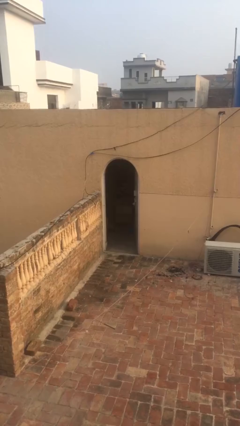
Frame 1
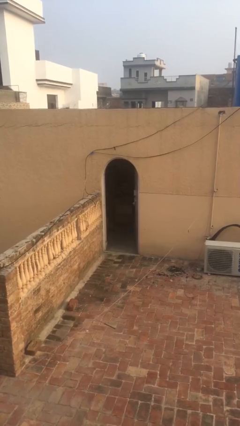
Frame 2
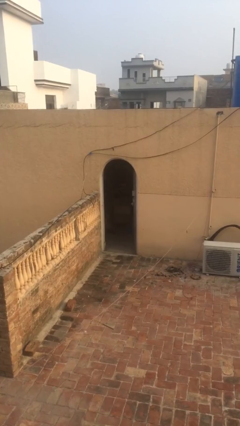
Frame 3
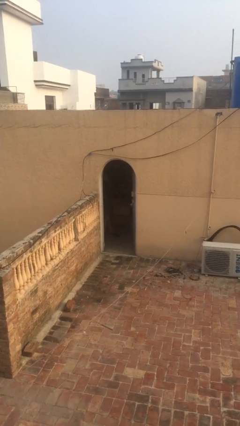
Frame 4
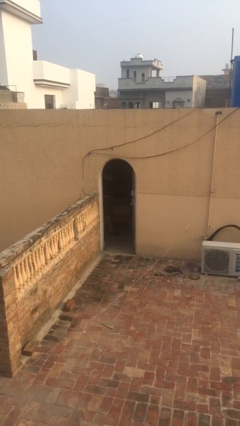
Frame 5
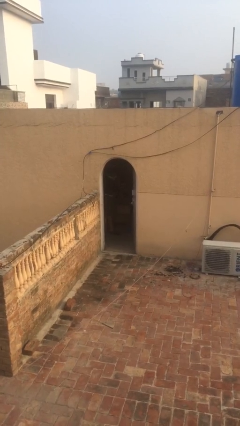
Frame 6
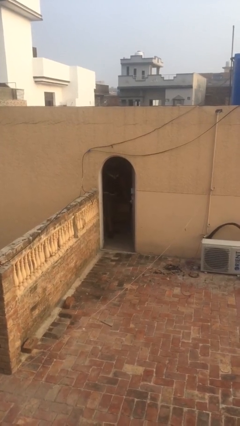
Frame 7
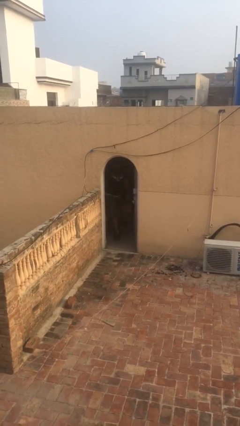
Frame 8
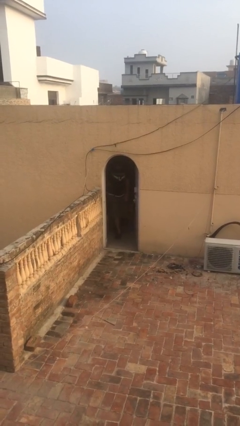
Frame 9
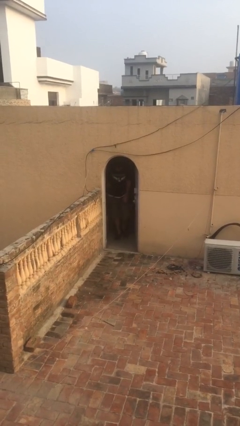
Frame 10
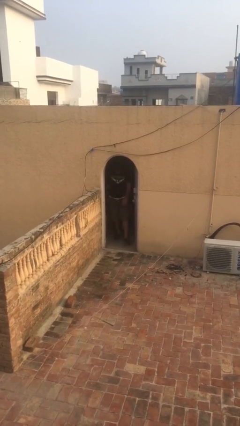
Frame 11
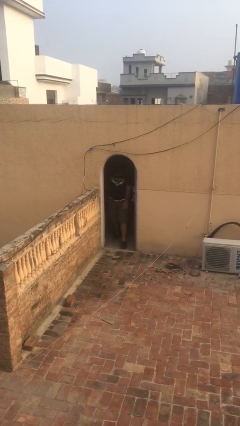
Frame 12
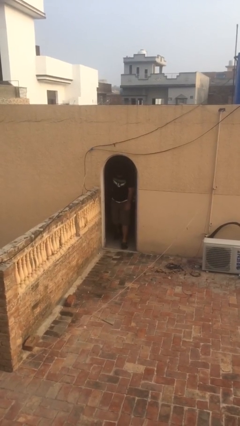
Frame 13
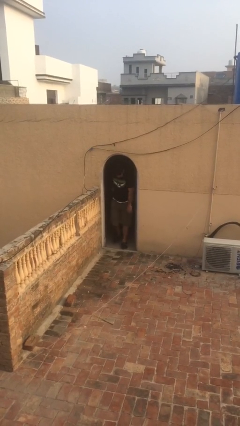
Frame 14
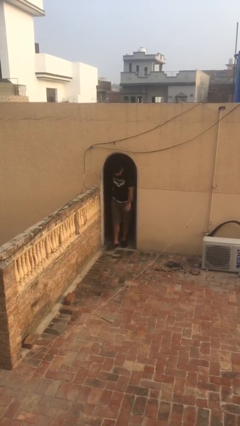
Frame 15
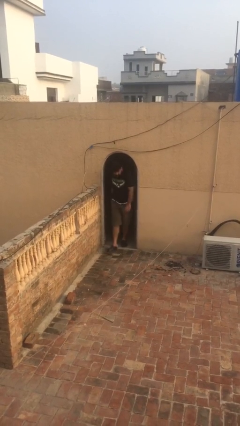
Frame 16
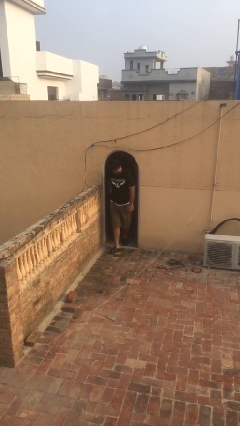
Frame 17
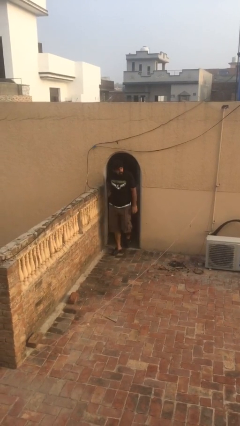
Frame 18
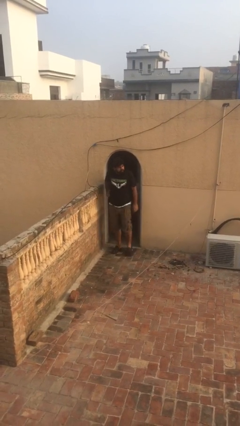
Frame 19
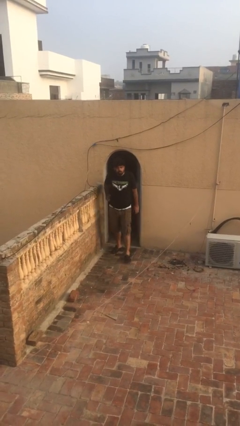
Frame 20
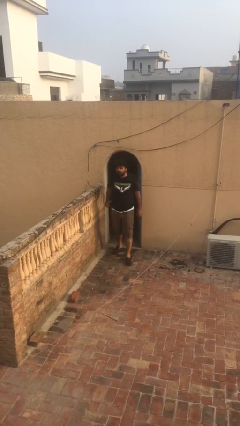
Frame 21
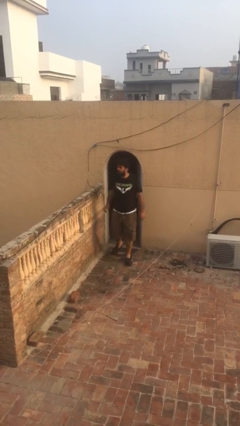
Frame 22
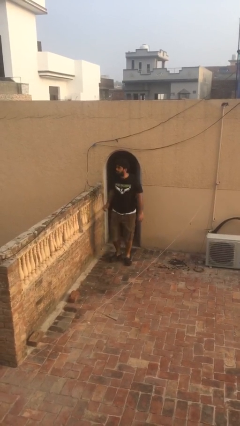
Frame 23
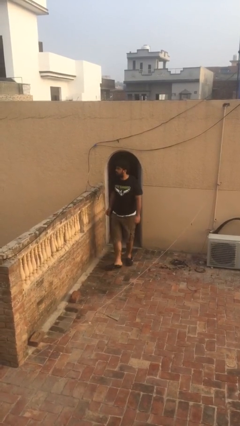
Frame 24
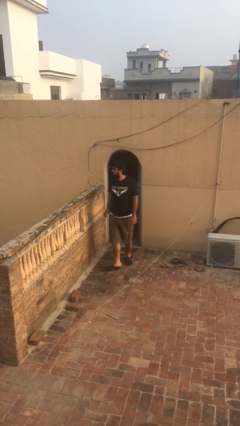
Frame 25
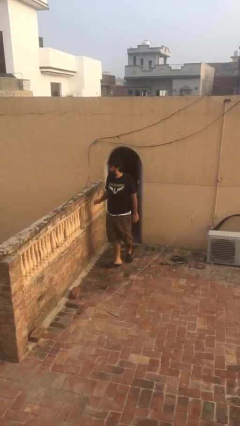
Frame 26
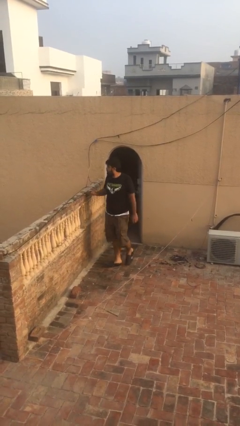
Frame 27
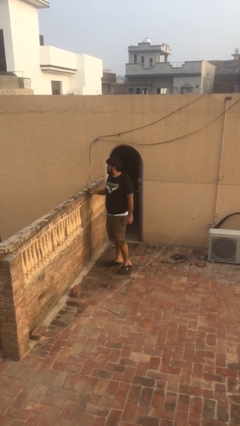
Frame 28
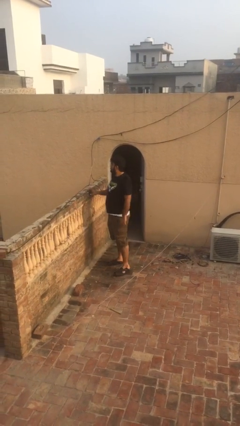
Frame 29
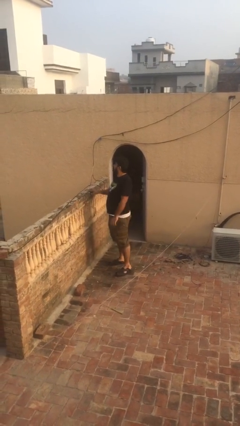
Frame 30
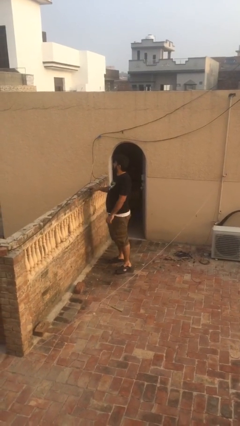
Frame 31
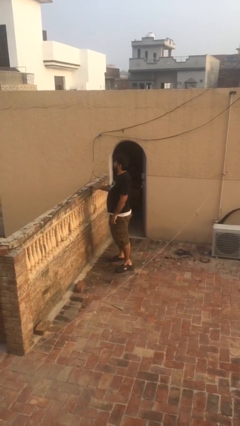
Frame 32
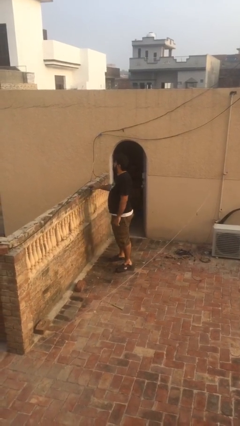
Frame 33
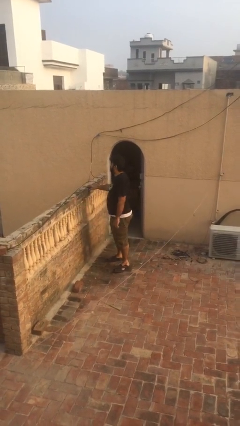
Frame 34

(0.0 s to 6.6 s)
person enters scene through structure

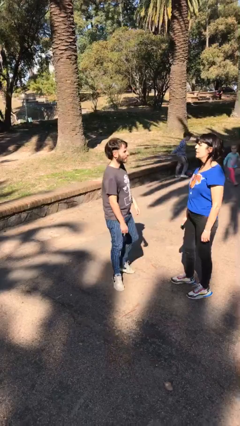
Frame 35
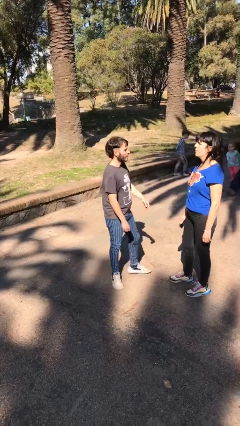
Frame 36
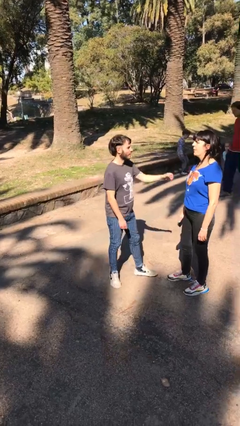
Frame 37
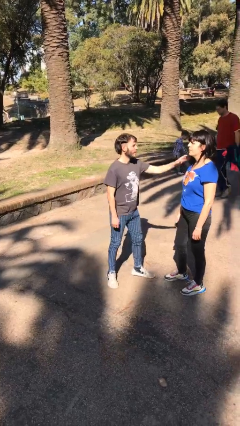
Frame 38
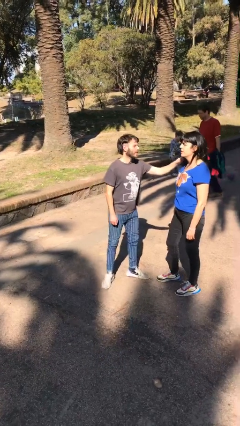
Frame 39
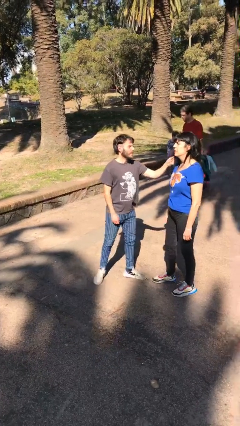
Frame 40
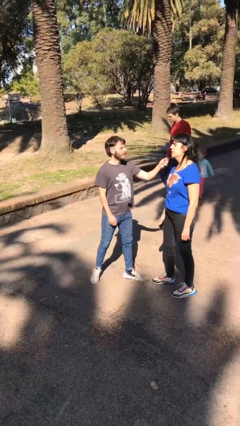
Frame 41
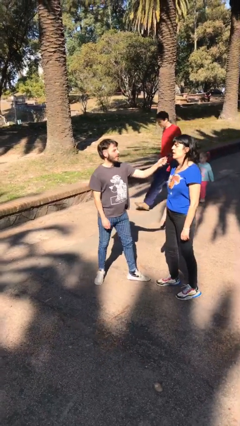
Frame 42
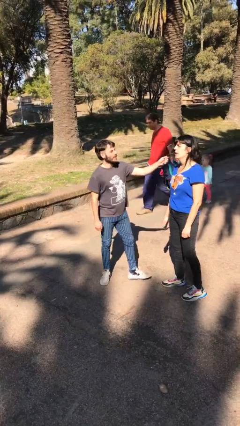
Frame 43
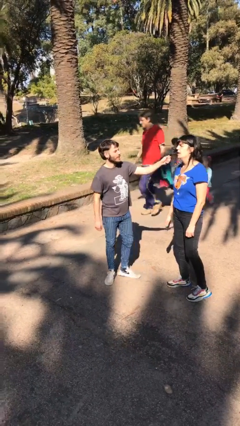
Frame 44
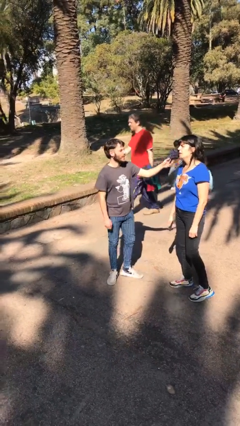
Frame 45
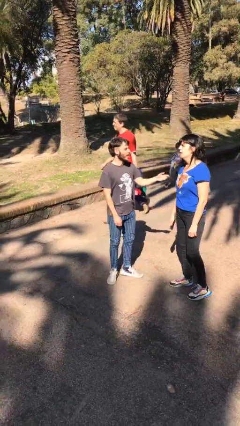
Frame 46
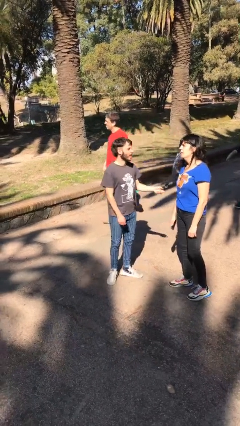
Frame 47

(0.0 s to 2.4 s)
person grabs person by hair

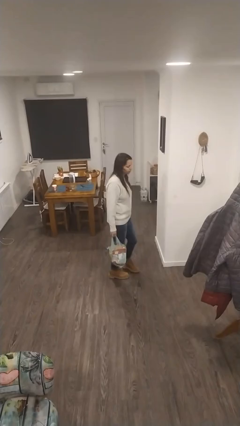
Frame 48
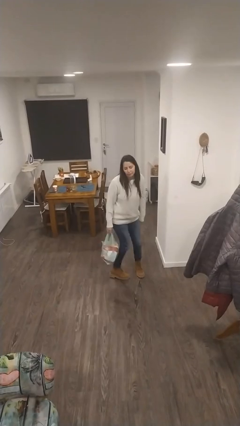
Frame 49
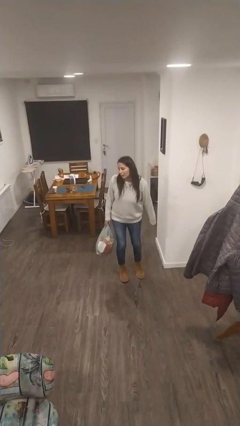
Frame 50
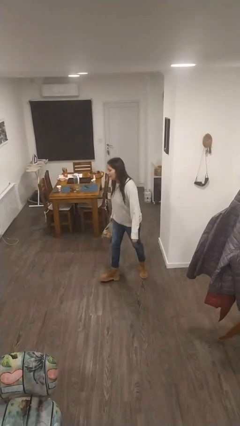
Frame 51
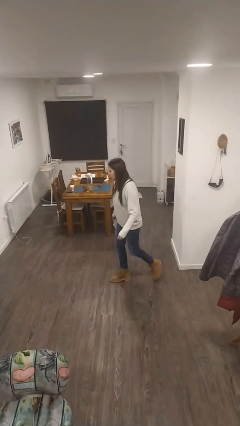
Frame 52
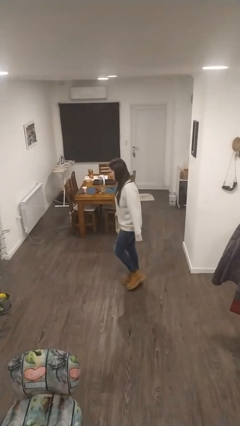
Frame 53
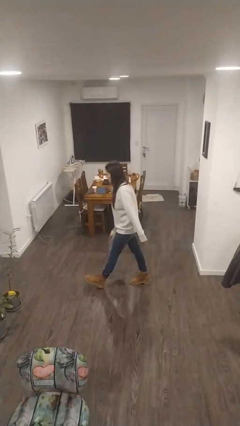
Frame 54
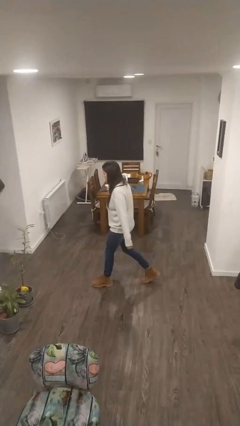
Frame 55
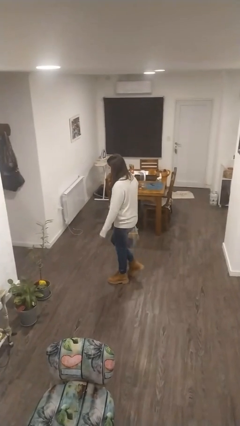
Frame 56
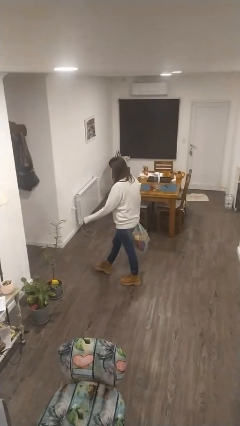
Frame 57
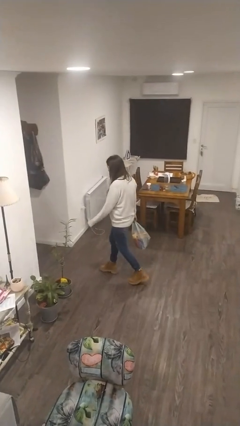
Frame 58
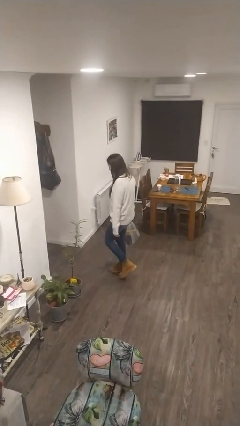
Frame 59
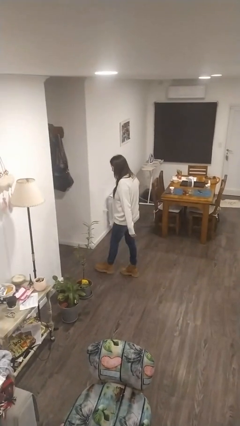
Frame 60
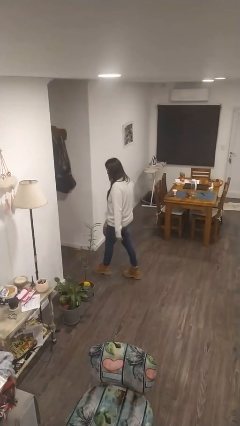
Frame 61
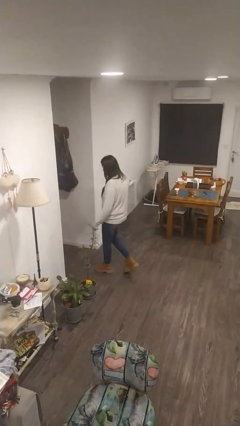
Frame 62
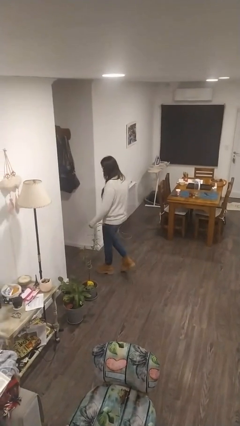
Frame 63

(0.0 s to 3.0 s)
person carries groceries

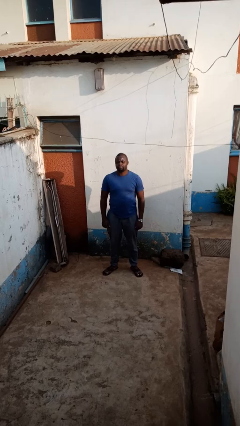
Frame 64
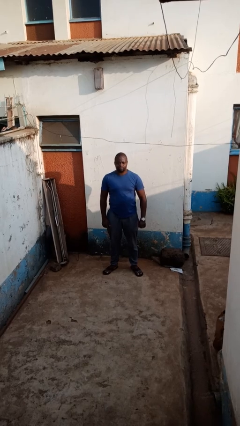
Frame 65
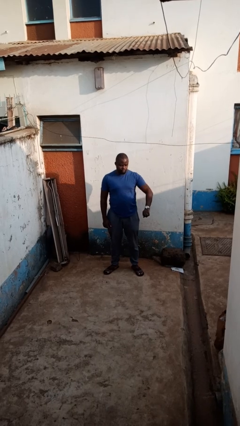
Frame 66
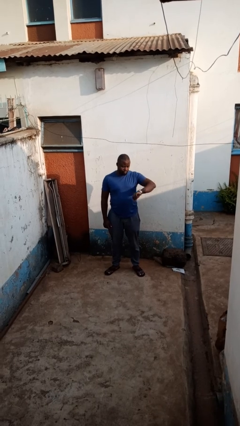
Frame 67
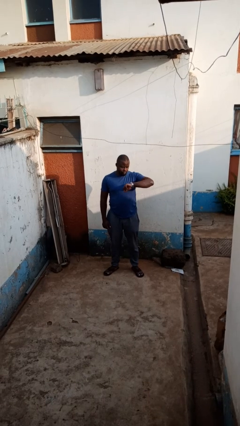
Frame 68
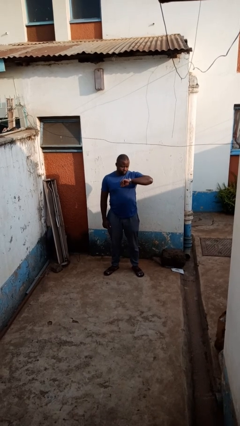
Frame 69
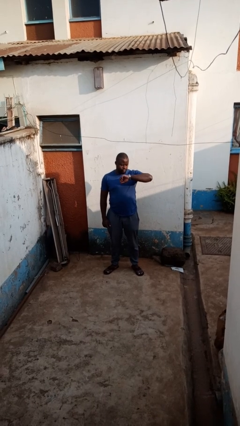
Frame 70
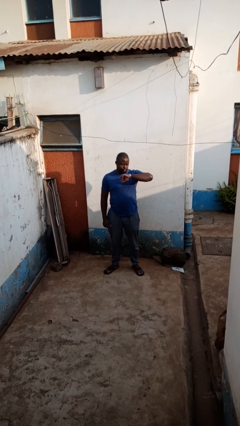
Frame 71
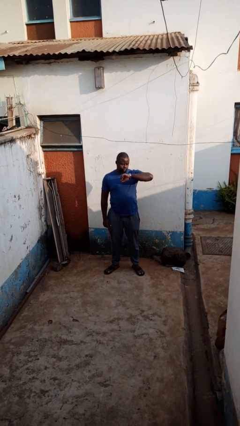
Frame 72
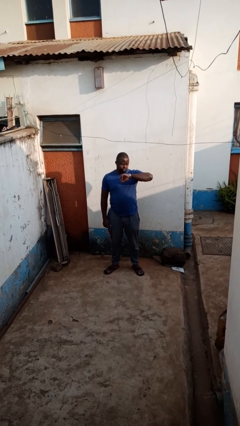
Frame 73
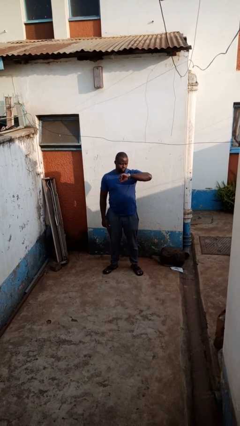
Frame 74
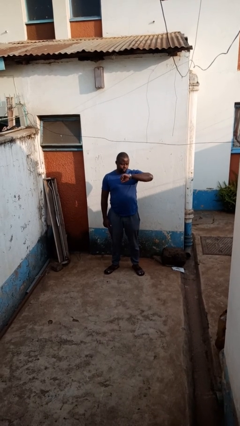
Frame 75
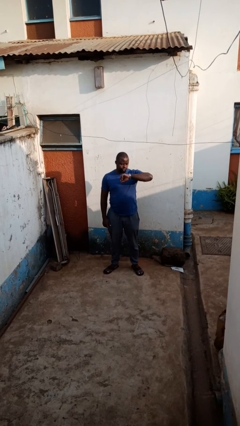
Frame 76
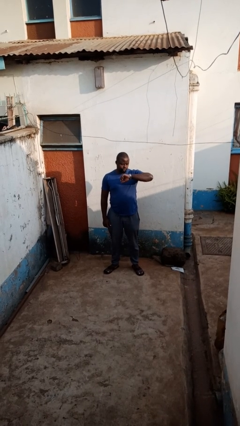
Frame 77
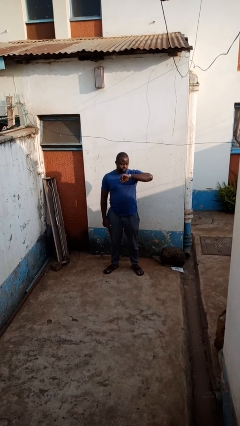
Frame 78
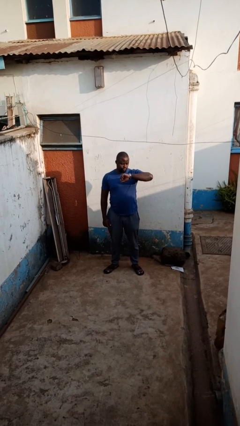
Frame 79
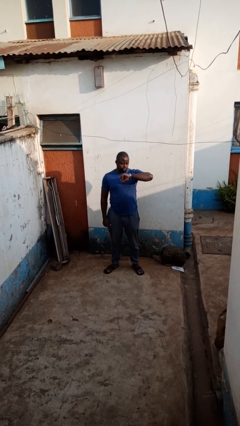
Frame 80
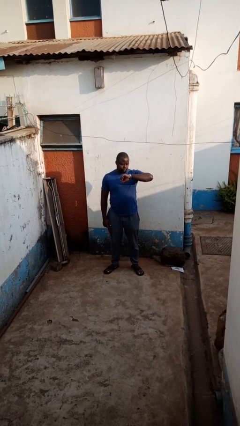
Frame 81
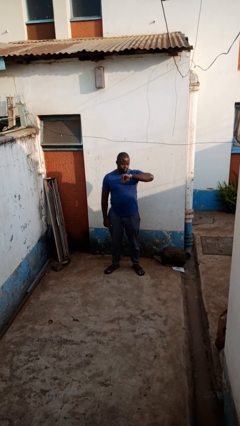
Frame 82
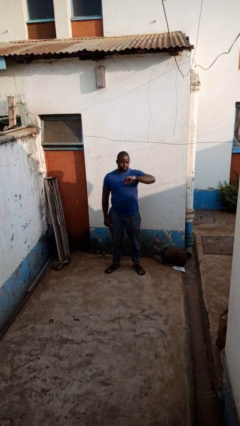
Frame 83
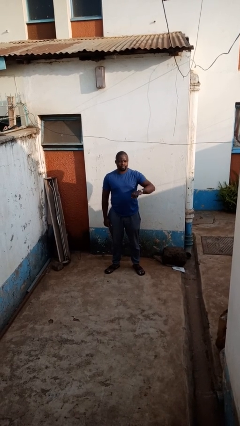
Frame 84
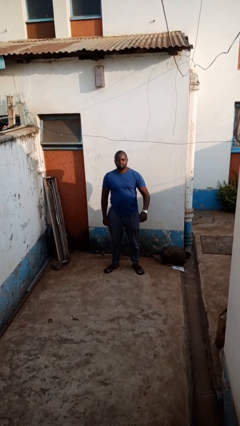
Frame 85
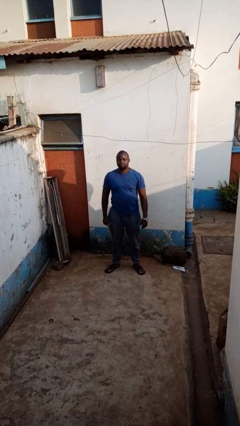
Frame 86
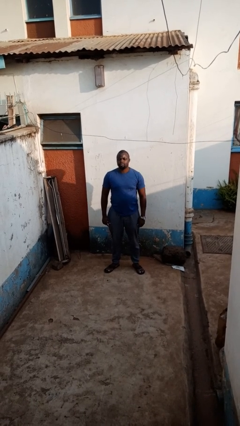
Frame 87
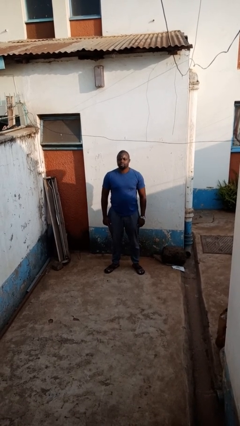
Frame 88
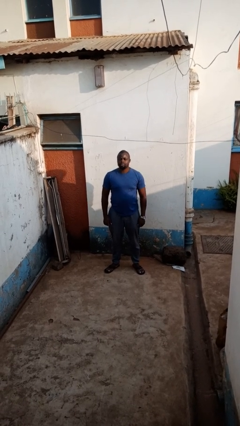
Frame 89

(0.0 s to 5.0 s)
person looks at wristwatch

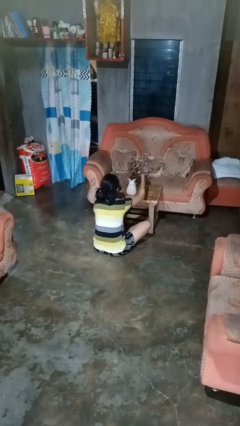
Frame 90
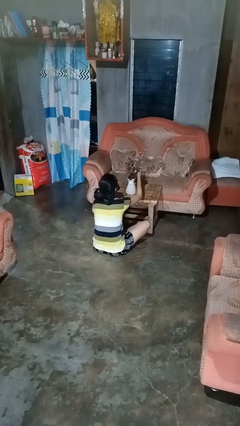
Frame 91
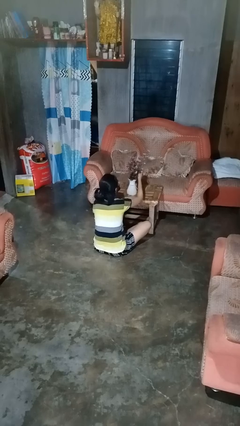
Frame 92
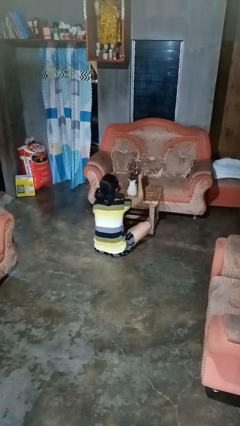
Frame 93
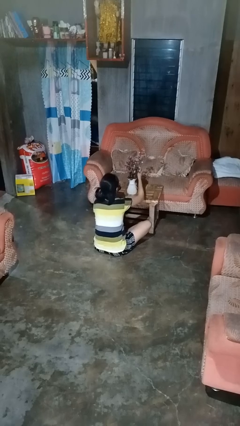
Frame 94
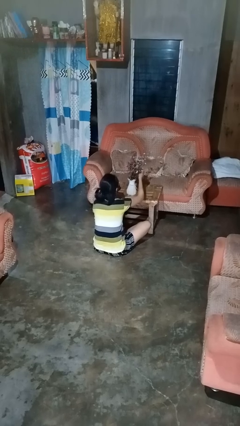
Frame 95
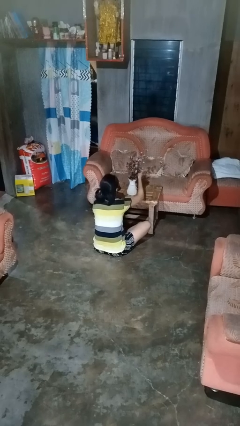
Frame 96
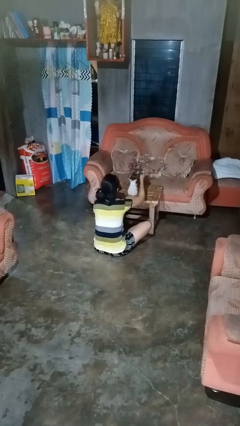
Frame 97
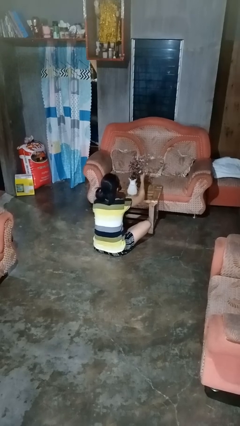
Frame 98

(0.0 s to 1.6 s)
person arranges flowers in vase
